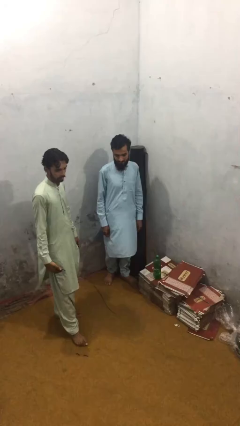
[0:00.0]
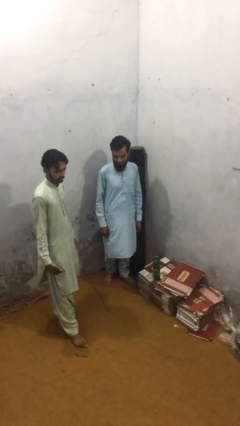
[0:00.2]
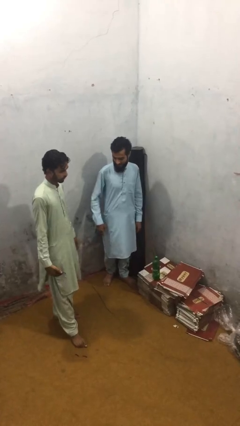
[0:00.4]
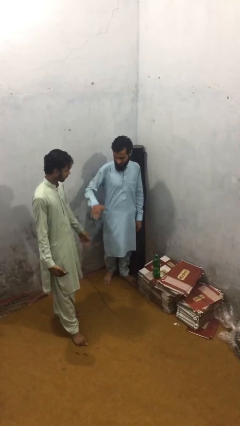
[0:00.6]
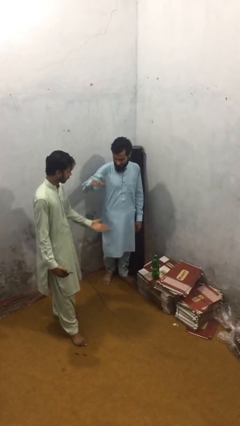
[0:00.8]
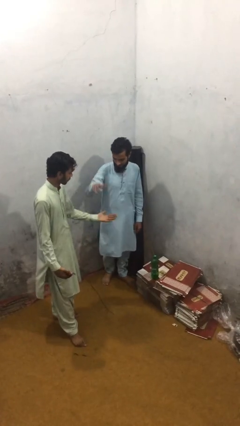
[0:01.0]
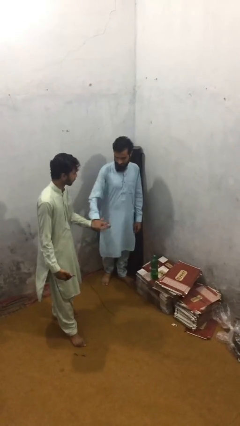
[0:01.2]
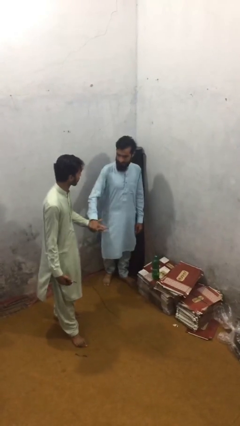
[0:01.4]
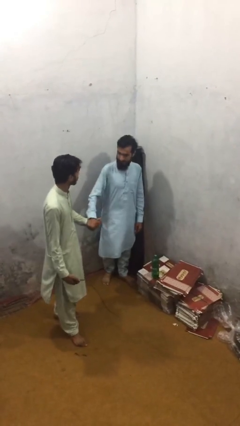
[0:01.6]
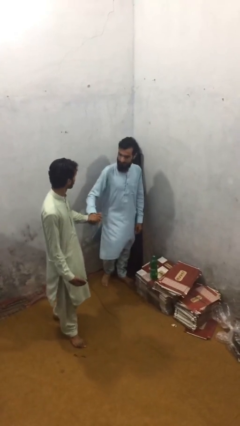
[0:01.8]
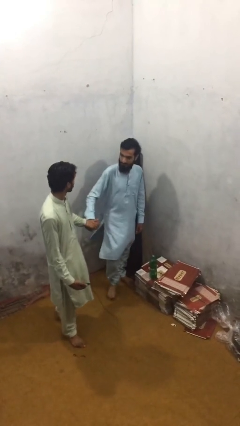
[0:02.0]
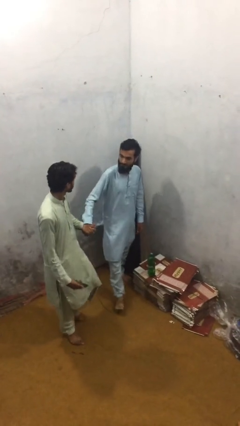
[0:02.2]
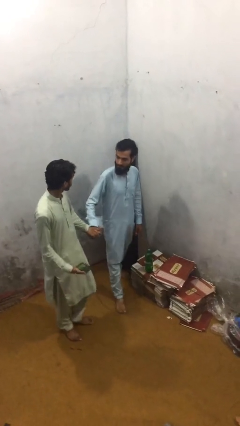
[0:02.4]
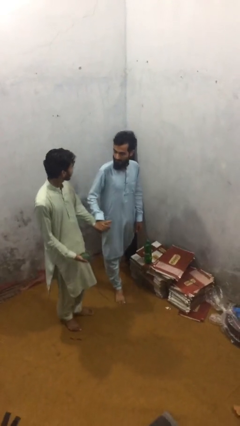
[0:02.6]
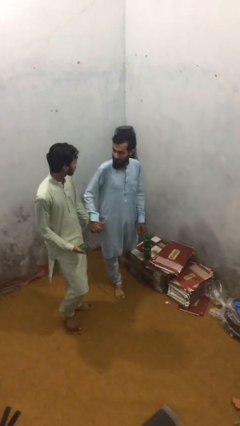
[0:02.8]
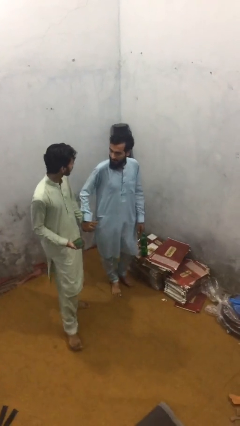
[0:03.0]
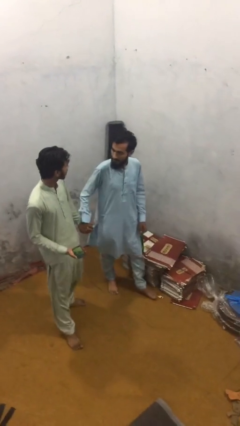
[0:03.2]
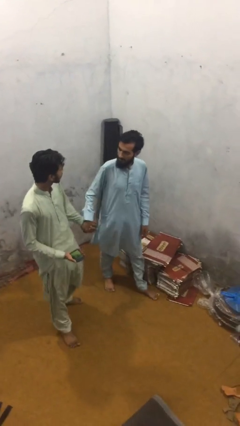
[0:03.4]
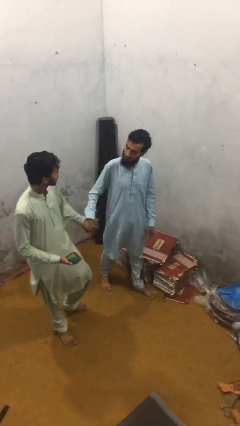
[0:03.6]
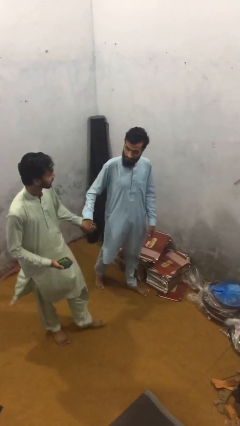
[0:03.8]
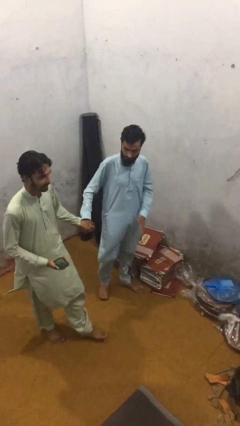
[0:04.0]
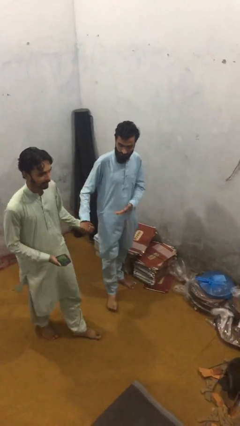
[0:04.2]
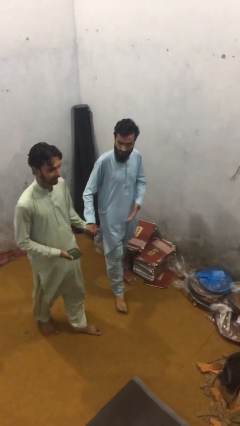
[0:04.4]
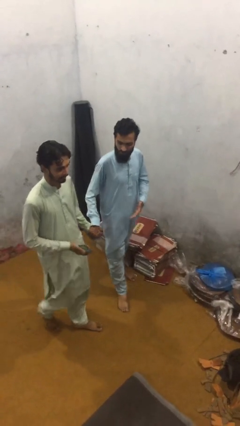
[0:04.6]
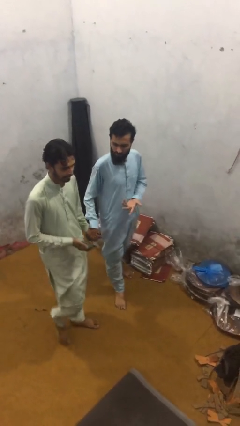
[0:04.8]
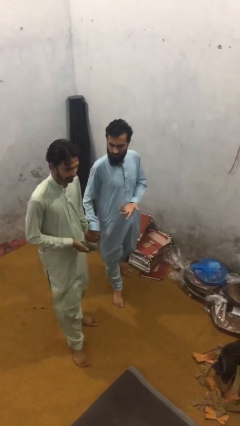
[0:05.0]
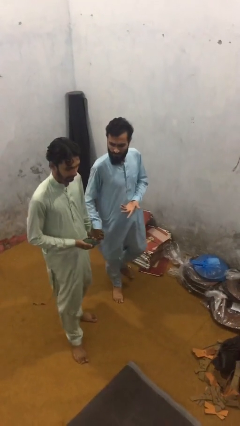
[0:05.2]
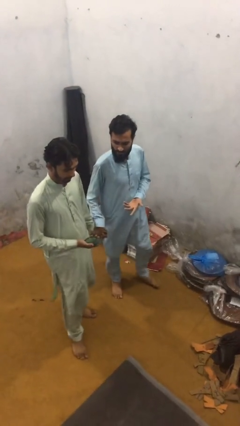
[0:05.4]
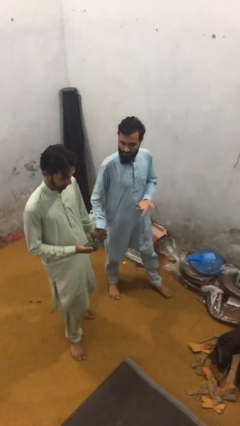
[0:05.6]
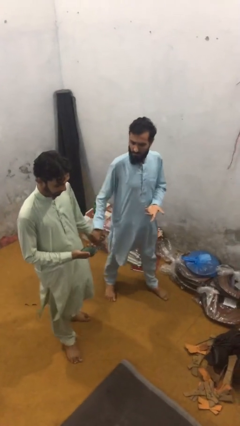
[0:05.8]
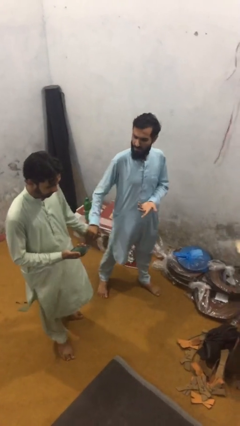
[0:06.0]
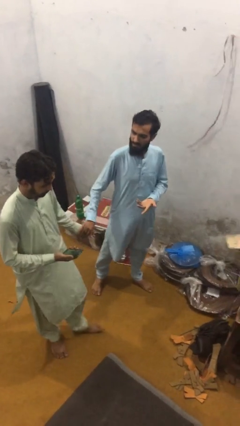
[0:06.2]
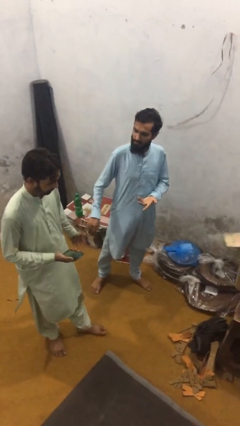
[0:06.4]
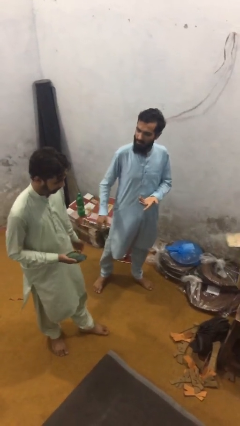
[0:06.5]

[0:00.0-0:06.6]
person holds hand

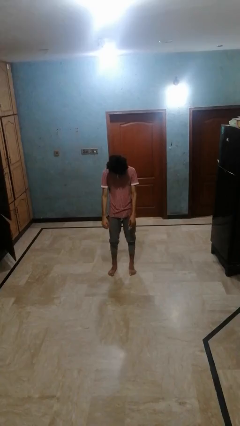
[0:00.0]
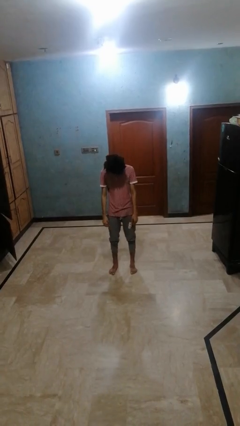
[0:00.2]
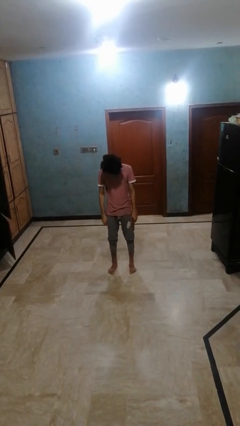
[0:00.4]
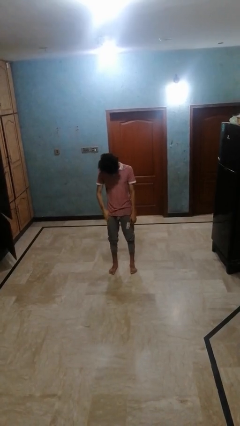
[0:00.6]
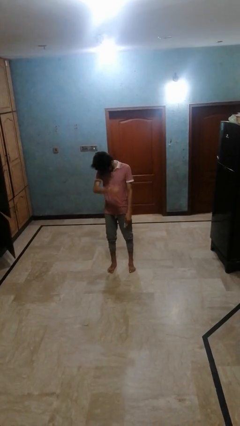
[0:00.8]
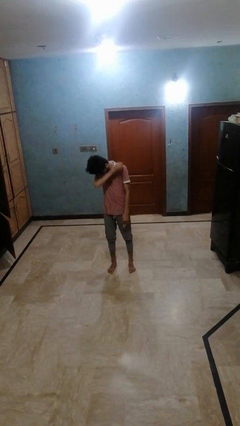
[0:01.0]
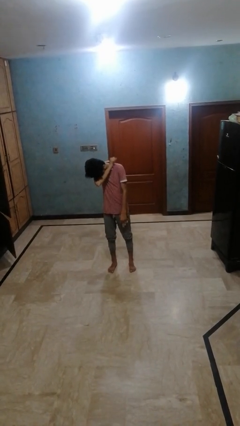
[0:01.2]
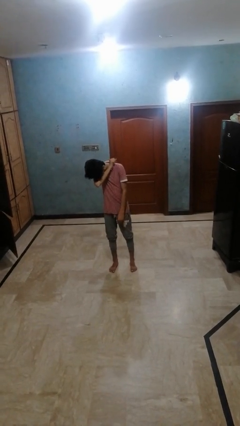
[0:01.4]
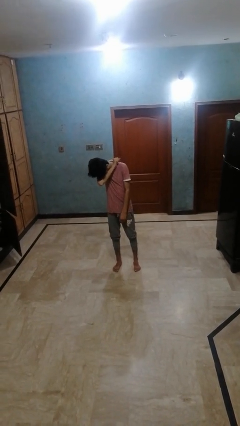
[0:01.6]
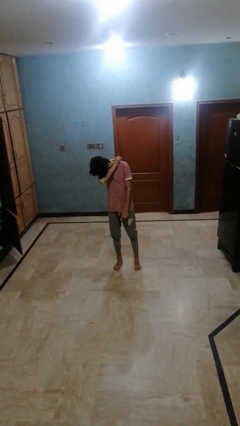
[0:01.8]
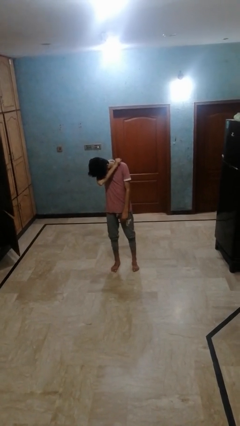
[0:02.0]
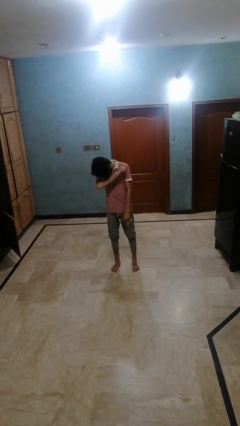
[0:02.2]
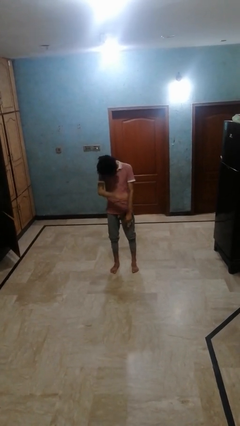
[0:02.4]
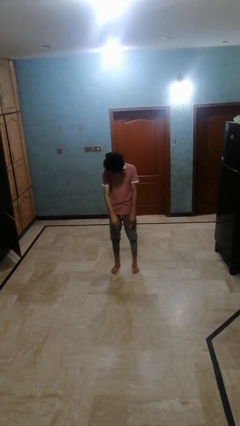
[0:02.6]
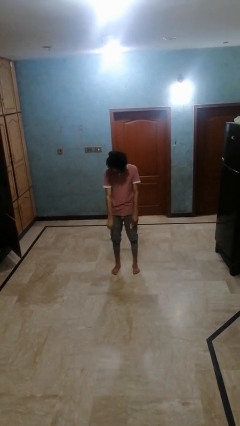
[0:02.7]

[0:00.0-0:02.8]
person sneezes into arm

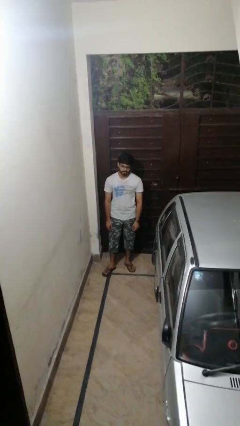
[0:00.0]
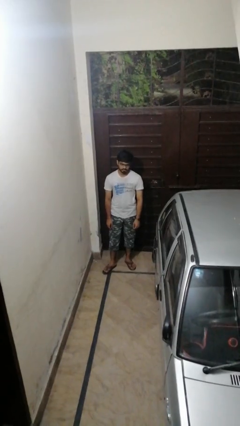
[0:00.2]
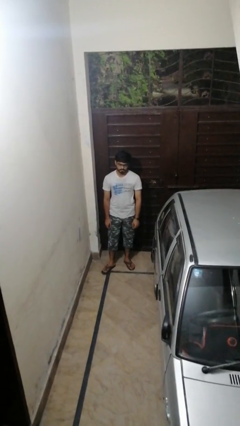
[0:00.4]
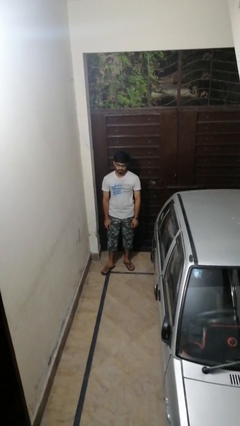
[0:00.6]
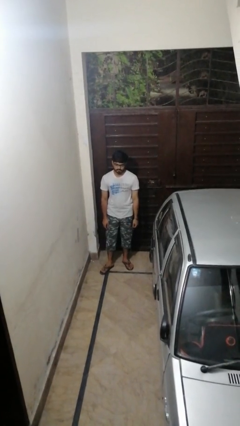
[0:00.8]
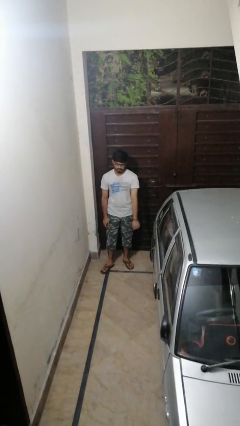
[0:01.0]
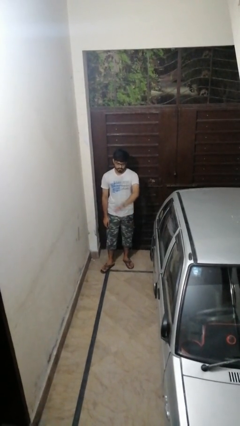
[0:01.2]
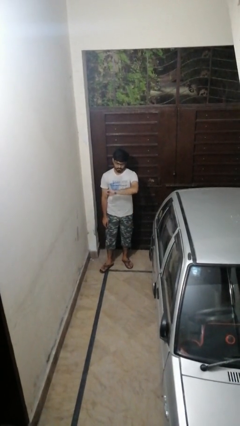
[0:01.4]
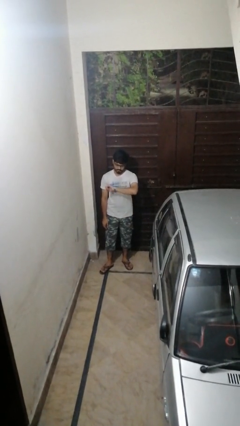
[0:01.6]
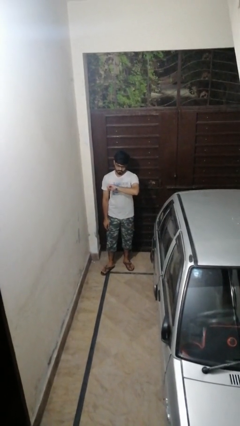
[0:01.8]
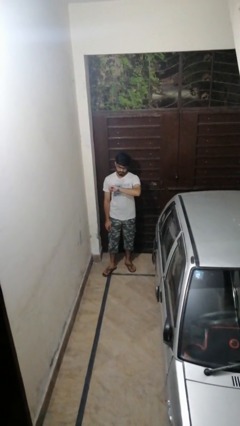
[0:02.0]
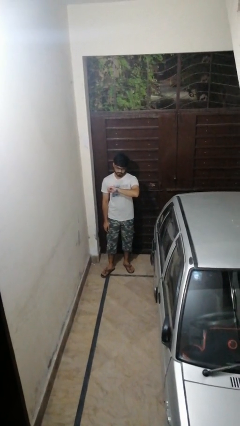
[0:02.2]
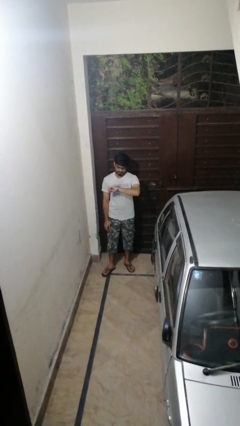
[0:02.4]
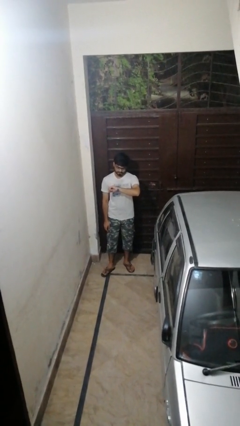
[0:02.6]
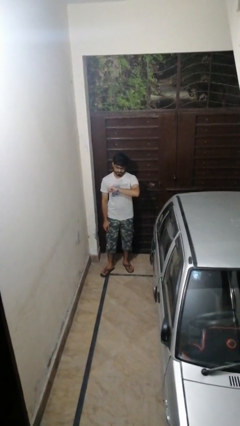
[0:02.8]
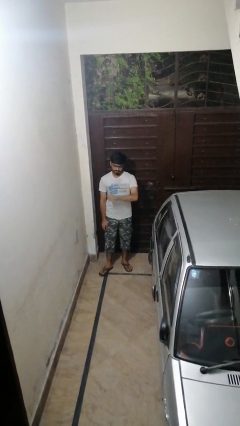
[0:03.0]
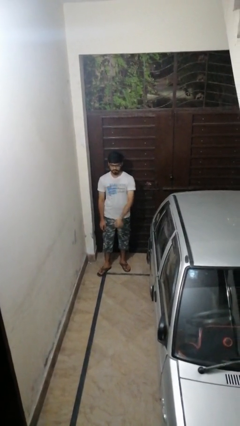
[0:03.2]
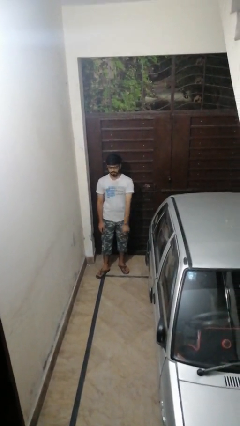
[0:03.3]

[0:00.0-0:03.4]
person looks at wristwatch

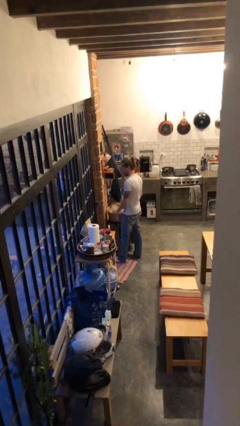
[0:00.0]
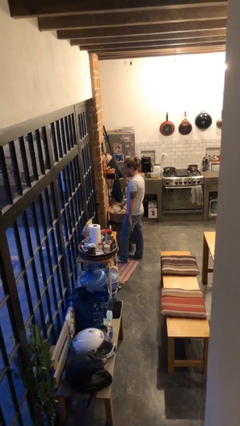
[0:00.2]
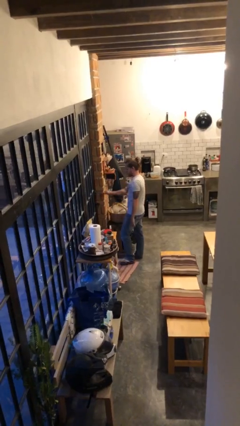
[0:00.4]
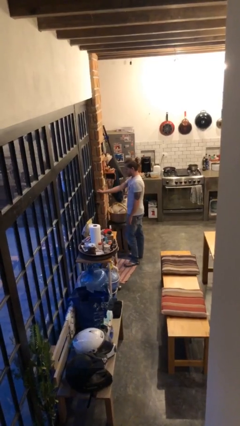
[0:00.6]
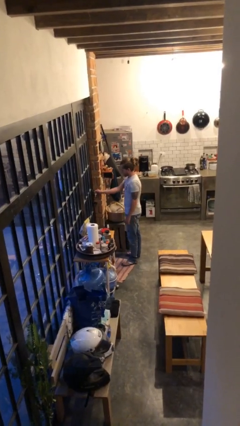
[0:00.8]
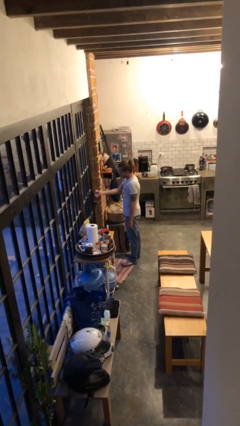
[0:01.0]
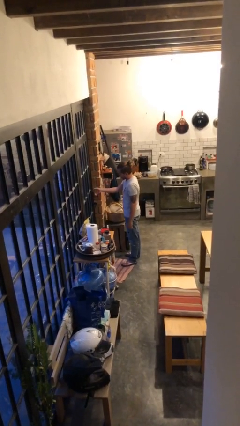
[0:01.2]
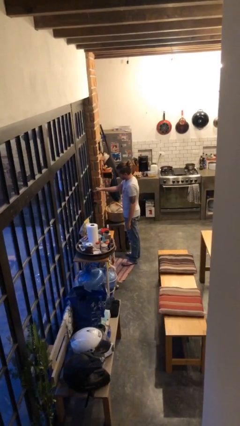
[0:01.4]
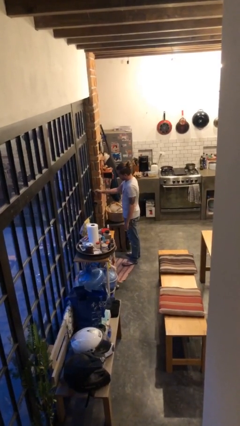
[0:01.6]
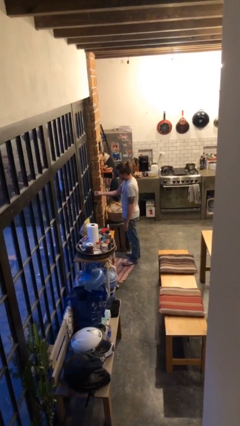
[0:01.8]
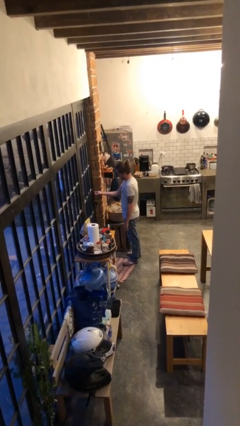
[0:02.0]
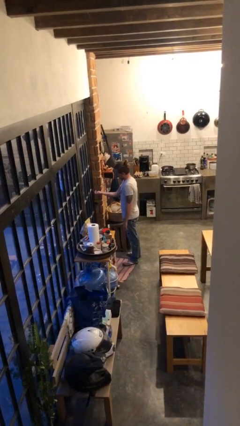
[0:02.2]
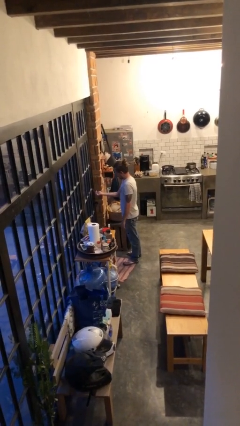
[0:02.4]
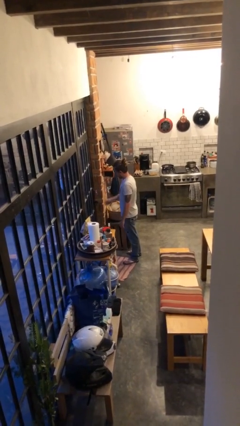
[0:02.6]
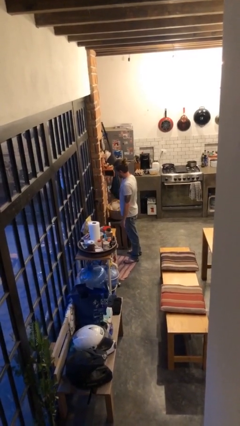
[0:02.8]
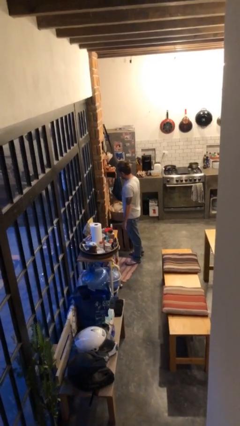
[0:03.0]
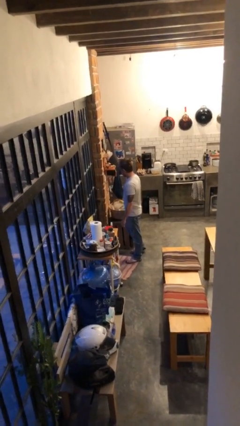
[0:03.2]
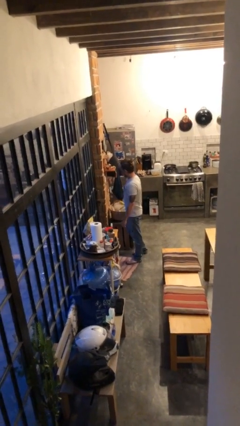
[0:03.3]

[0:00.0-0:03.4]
person locks door with keys

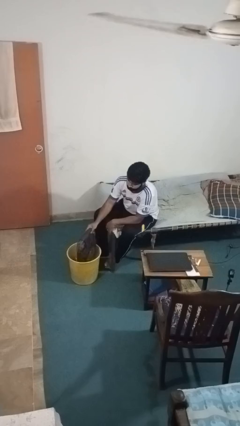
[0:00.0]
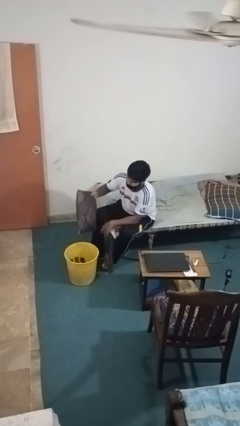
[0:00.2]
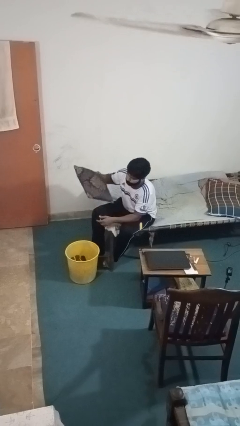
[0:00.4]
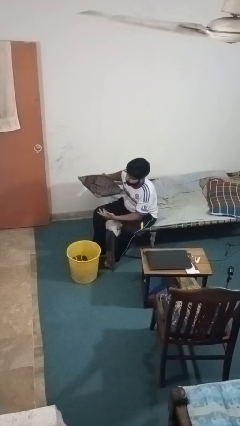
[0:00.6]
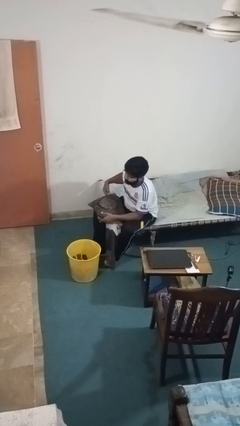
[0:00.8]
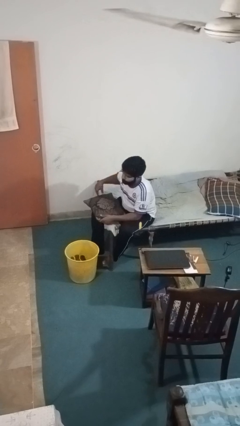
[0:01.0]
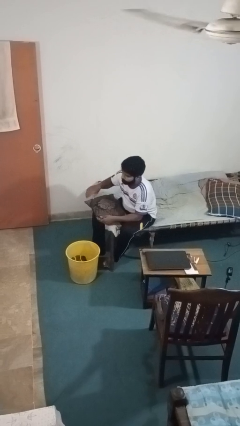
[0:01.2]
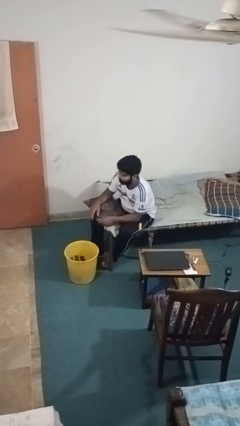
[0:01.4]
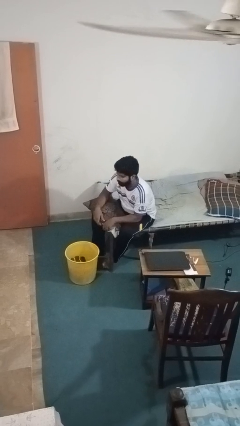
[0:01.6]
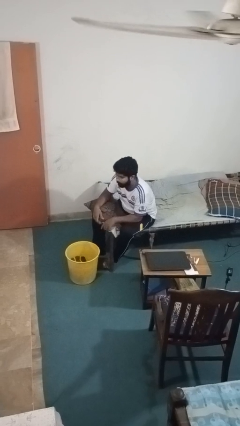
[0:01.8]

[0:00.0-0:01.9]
person takes object from basket
